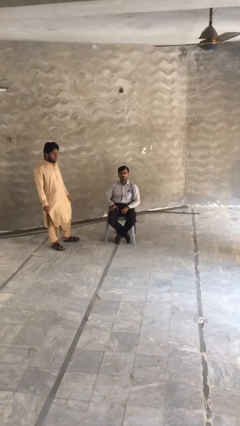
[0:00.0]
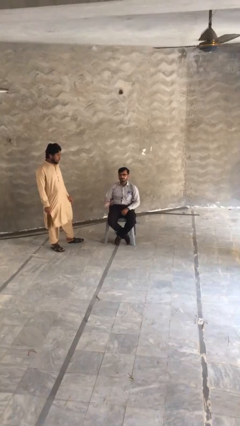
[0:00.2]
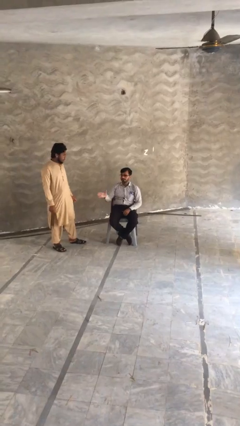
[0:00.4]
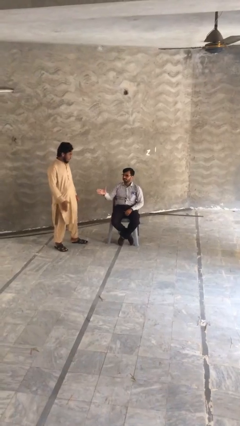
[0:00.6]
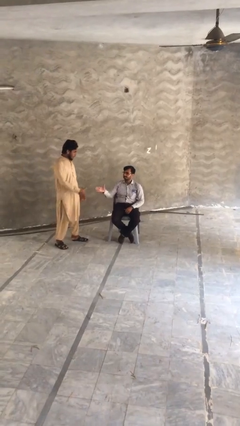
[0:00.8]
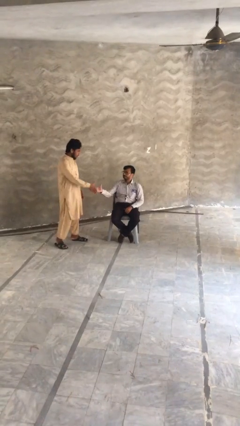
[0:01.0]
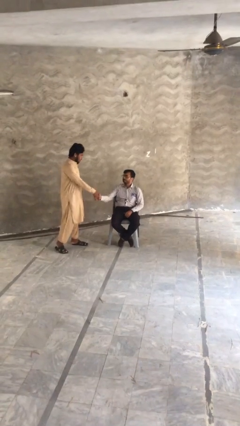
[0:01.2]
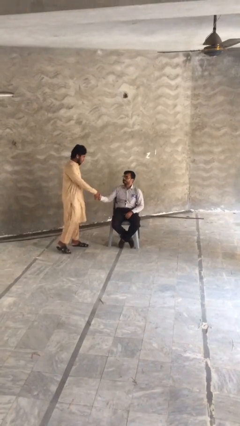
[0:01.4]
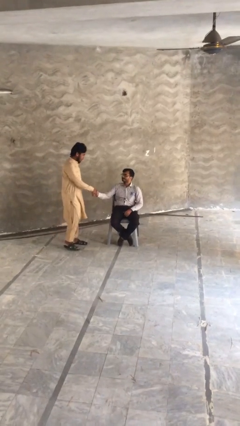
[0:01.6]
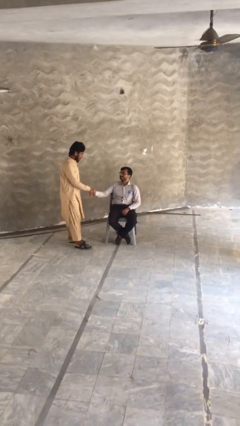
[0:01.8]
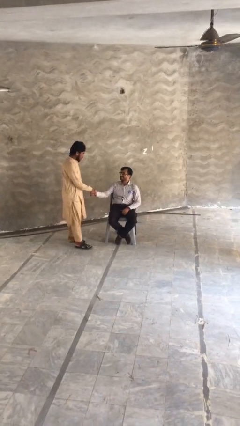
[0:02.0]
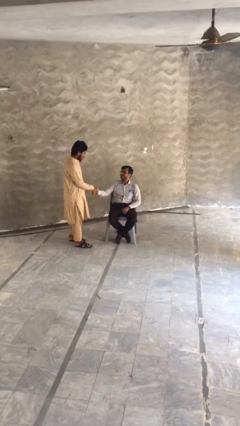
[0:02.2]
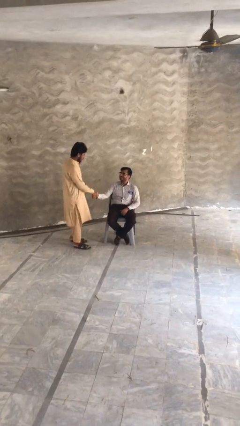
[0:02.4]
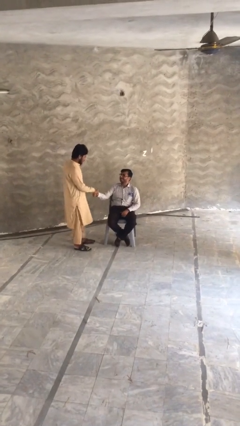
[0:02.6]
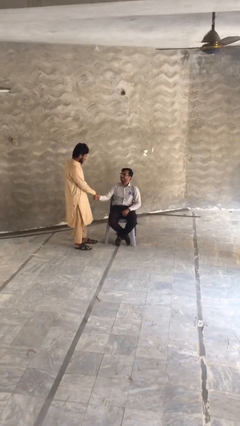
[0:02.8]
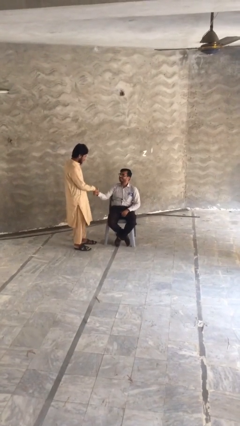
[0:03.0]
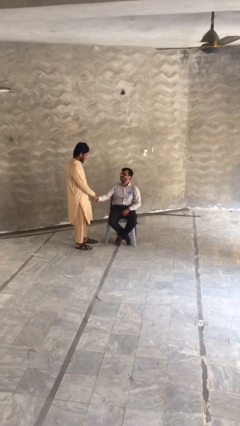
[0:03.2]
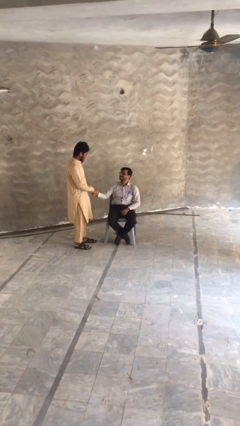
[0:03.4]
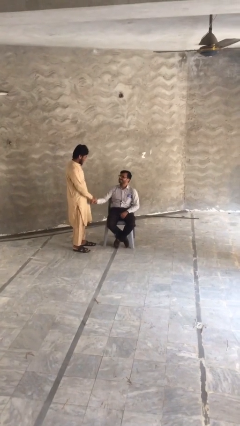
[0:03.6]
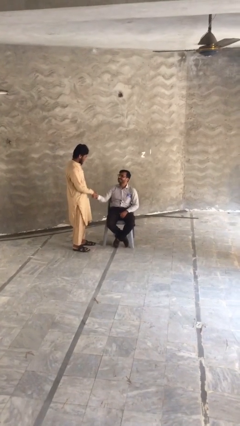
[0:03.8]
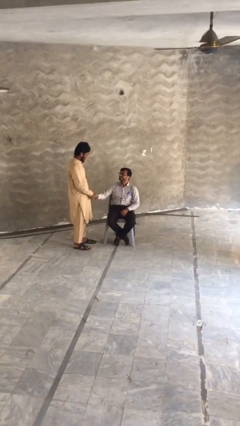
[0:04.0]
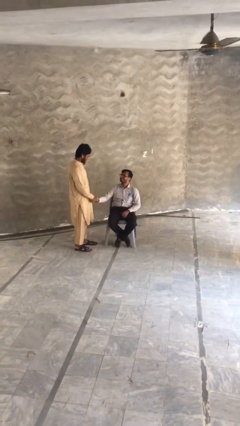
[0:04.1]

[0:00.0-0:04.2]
person shakes hand

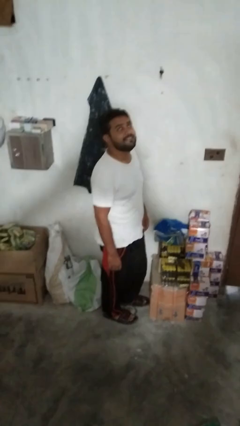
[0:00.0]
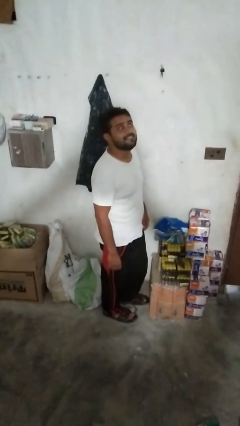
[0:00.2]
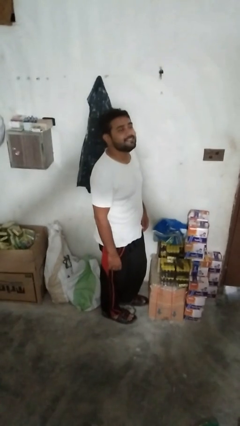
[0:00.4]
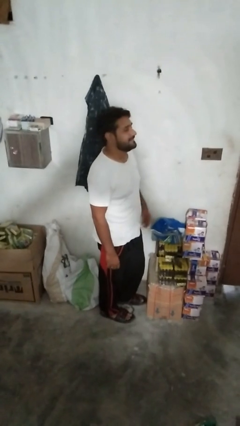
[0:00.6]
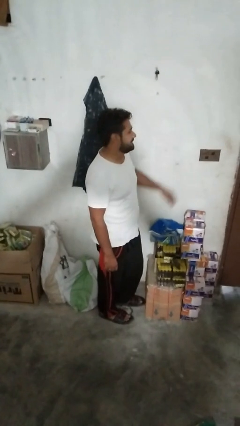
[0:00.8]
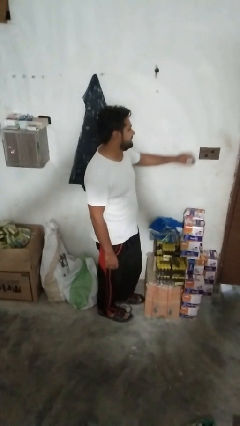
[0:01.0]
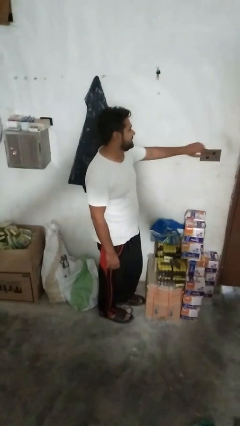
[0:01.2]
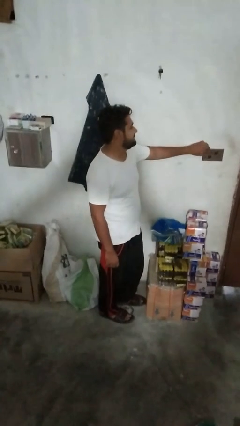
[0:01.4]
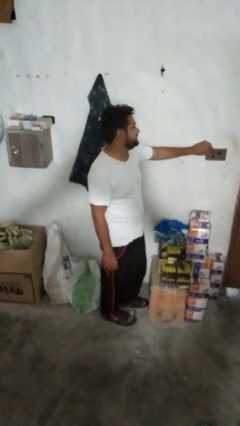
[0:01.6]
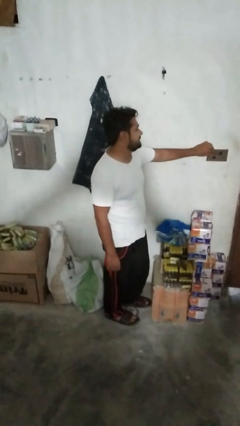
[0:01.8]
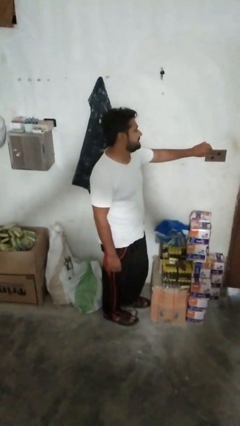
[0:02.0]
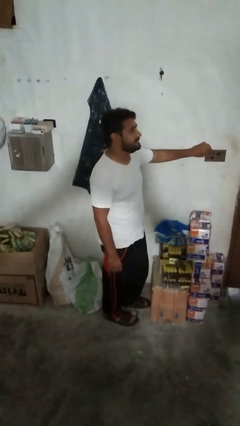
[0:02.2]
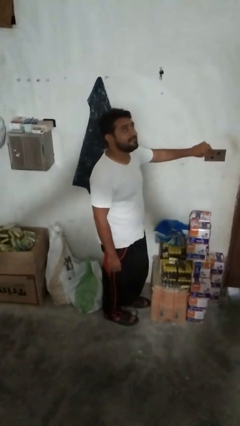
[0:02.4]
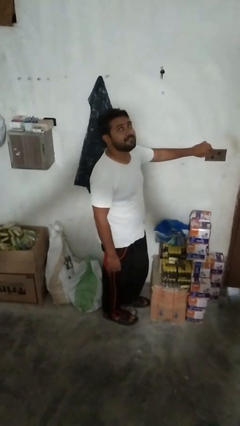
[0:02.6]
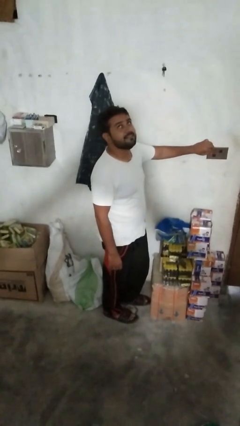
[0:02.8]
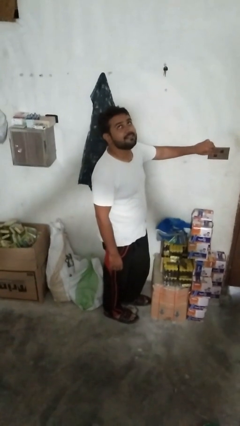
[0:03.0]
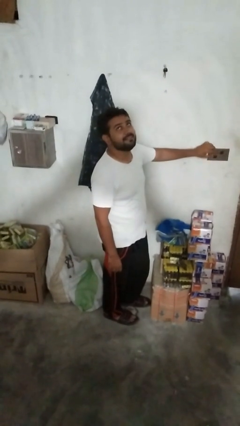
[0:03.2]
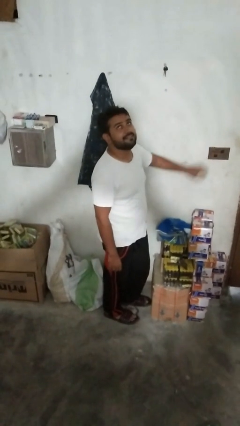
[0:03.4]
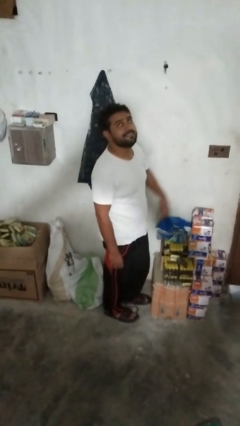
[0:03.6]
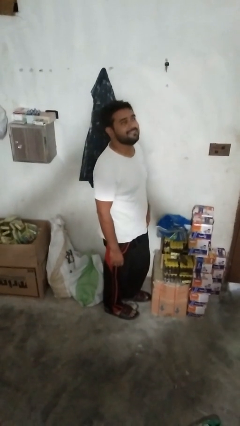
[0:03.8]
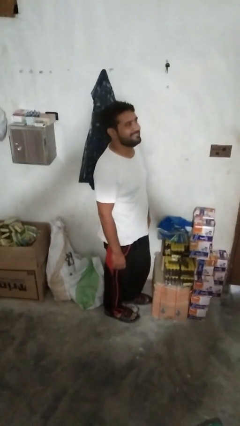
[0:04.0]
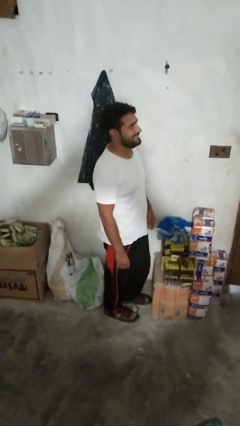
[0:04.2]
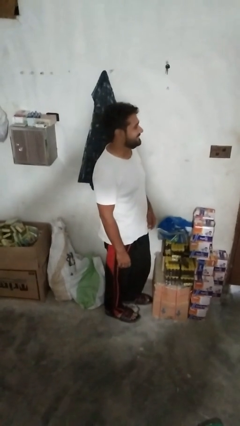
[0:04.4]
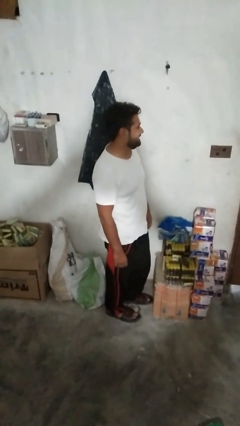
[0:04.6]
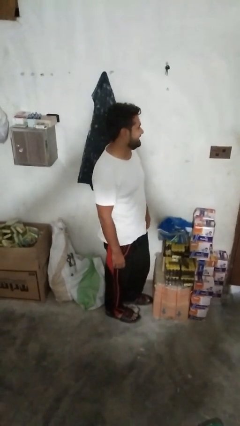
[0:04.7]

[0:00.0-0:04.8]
person adjusts thermostat

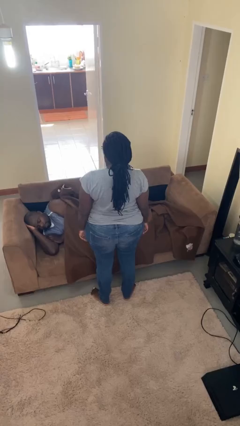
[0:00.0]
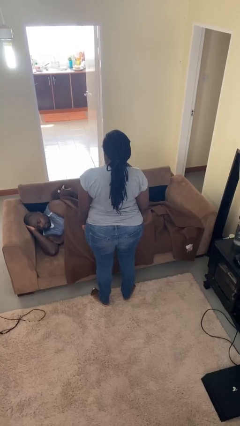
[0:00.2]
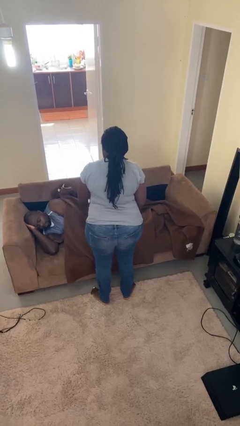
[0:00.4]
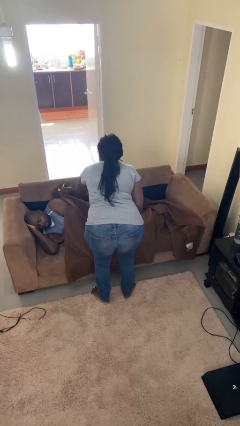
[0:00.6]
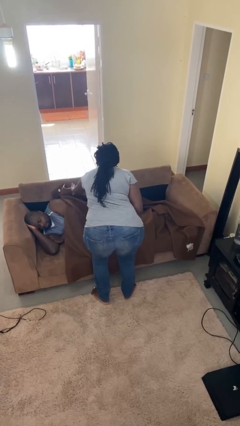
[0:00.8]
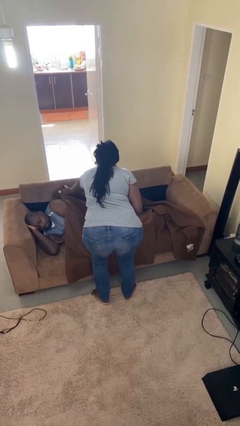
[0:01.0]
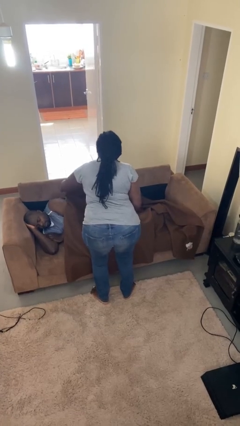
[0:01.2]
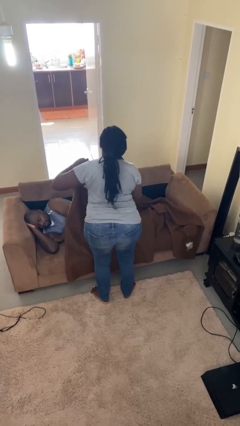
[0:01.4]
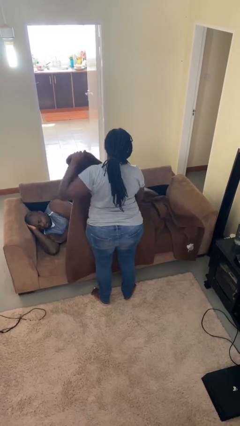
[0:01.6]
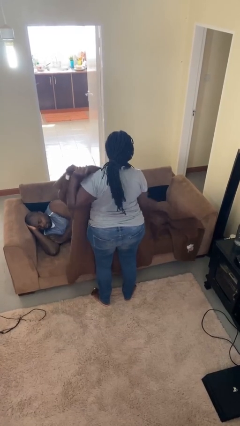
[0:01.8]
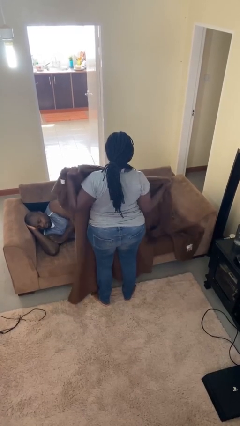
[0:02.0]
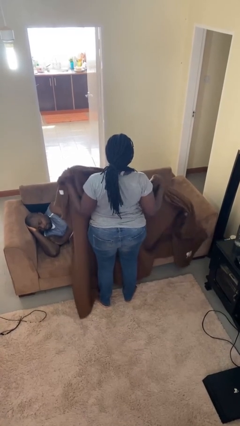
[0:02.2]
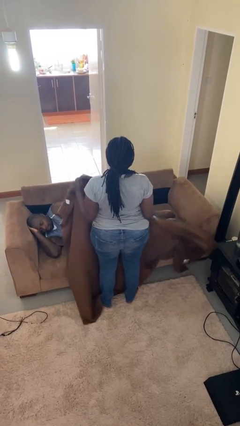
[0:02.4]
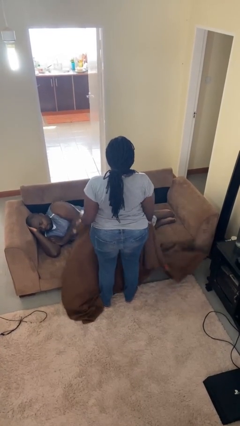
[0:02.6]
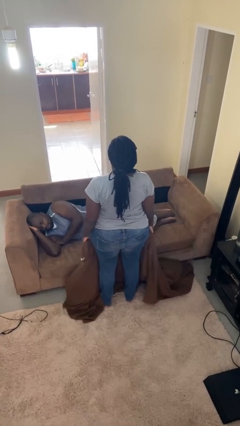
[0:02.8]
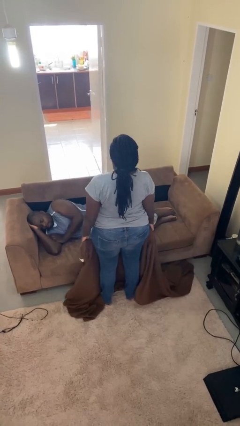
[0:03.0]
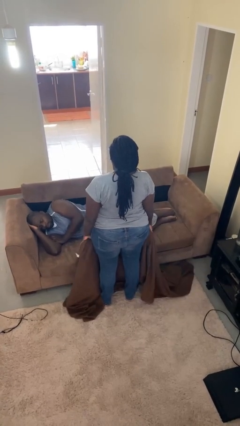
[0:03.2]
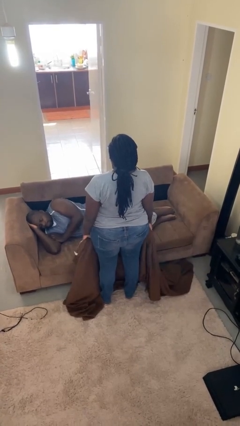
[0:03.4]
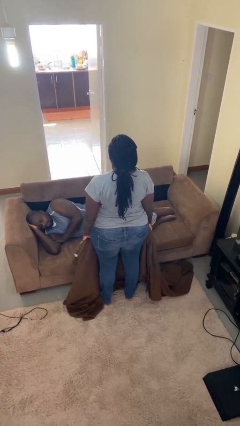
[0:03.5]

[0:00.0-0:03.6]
person uncovers friend with blanket

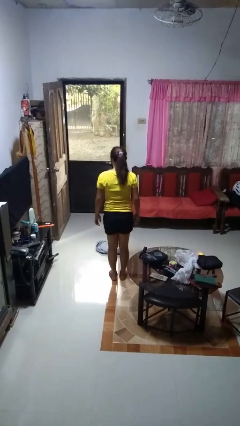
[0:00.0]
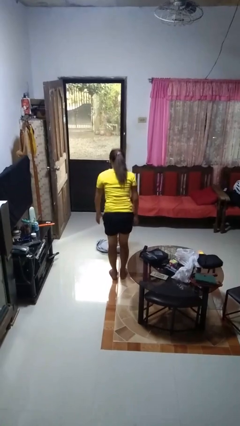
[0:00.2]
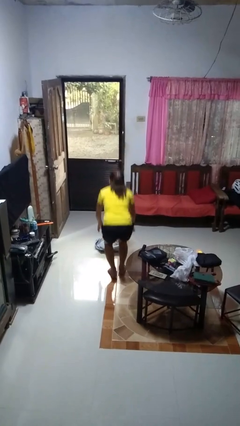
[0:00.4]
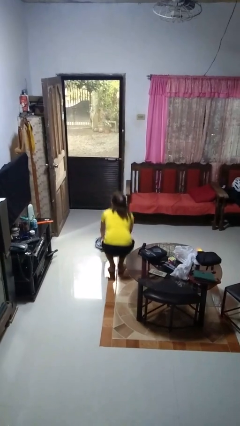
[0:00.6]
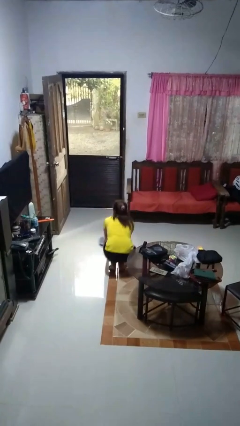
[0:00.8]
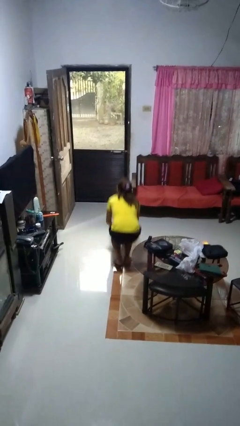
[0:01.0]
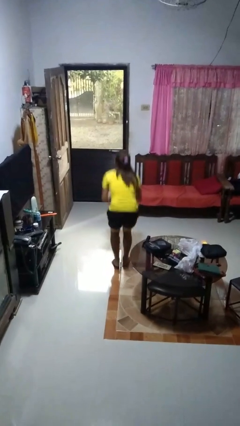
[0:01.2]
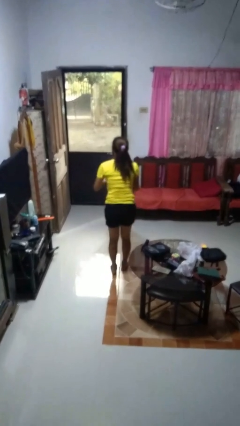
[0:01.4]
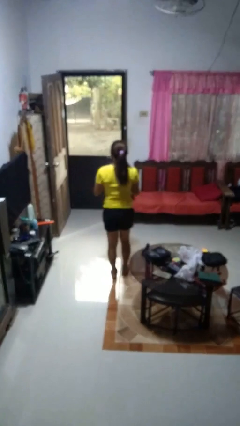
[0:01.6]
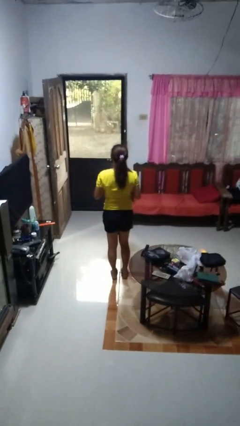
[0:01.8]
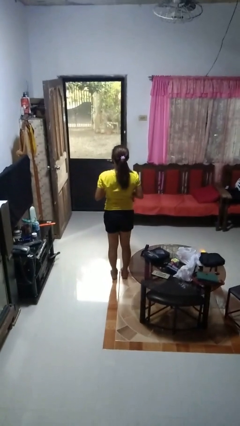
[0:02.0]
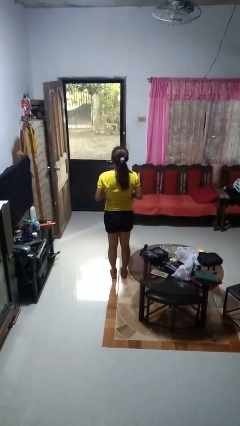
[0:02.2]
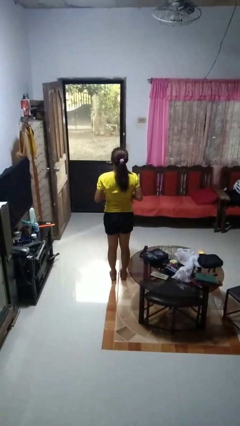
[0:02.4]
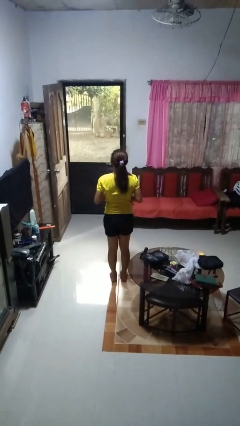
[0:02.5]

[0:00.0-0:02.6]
person picks up object from floor

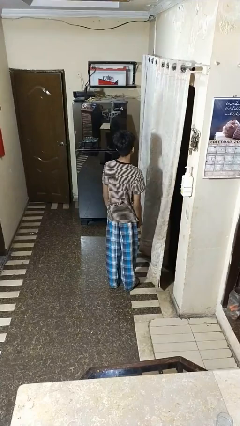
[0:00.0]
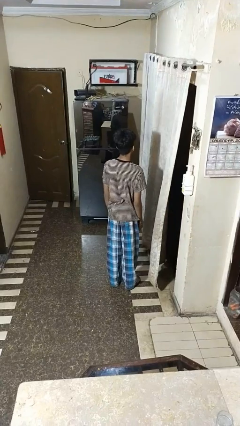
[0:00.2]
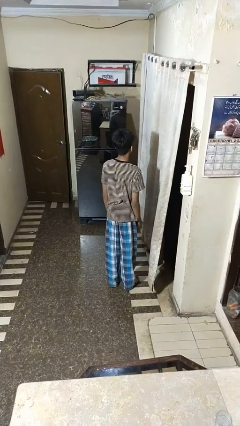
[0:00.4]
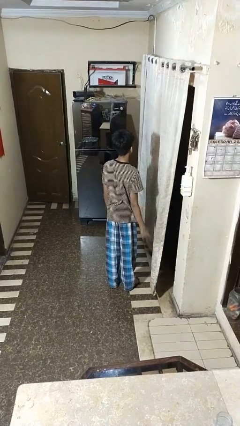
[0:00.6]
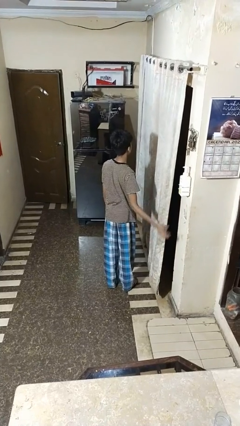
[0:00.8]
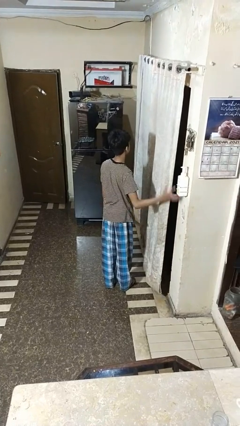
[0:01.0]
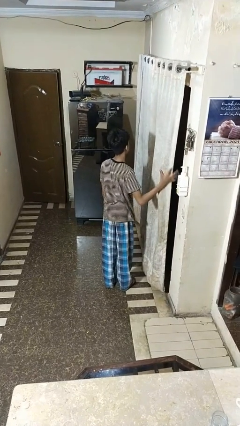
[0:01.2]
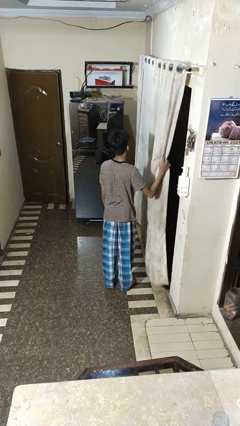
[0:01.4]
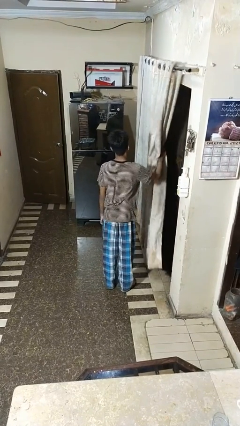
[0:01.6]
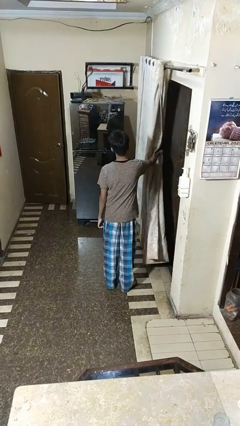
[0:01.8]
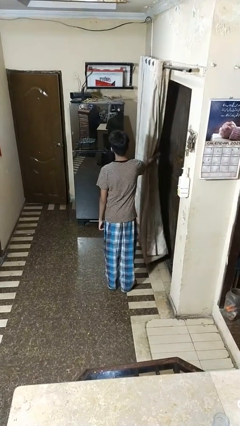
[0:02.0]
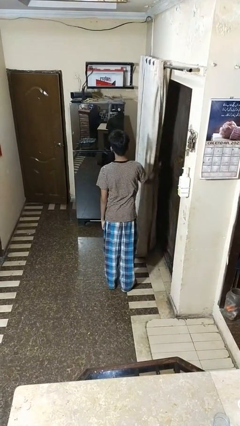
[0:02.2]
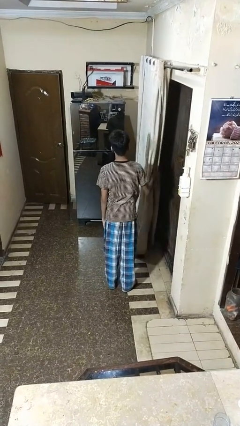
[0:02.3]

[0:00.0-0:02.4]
person opens curtains

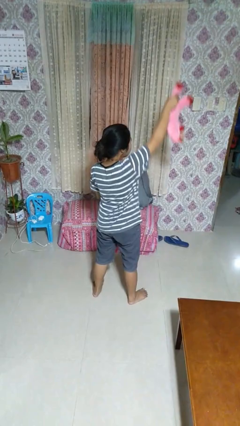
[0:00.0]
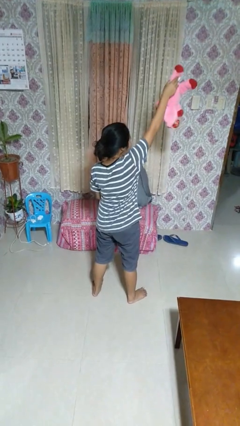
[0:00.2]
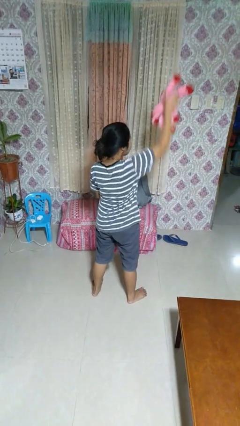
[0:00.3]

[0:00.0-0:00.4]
person drops object
